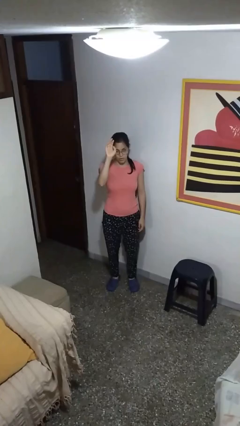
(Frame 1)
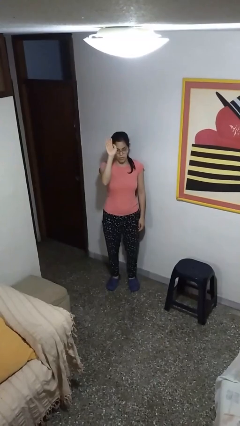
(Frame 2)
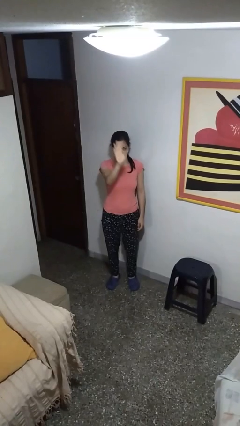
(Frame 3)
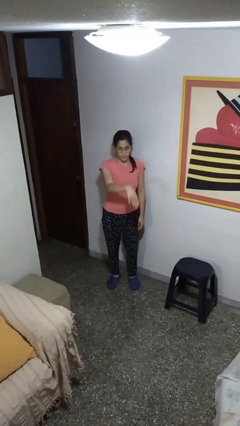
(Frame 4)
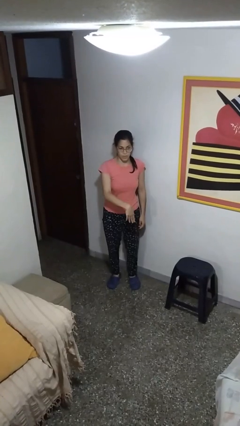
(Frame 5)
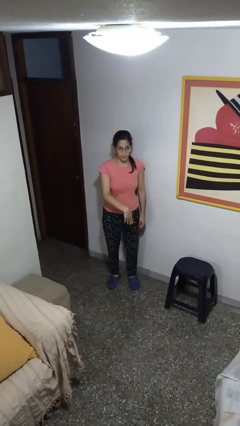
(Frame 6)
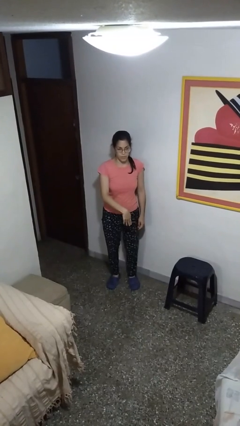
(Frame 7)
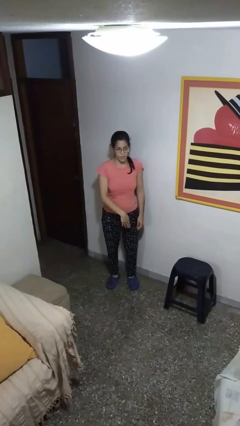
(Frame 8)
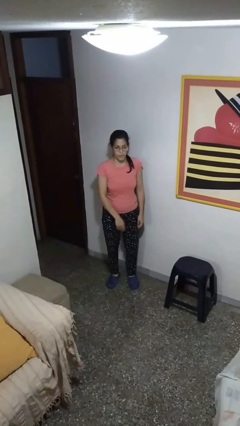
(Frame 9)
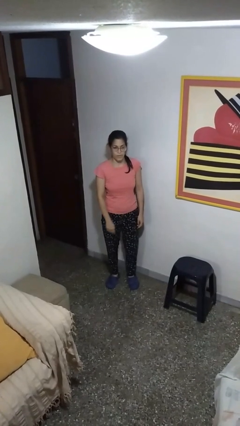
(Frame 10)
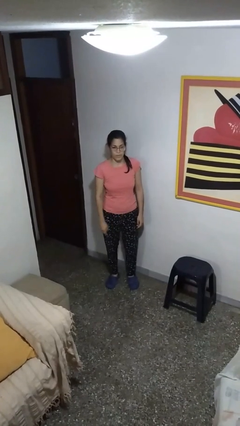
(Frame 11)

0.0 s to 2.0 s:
person gestures swipe down

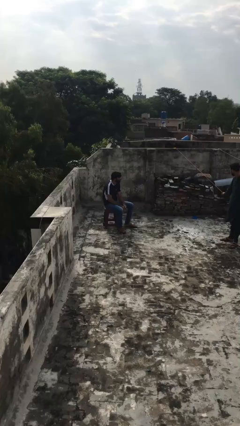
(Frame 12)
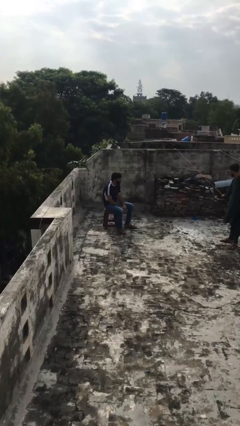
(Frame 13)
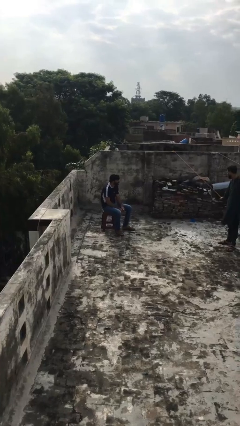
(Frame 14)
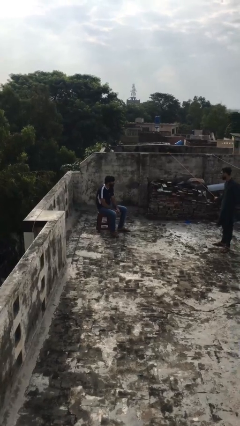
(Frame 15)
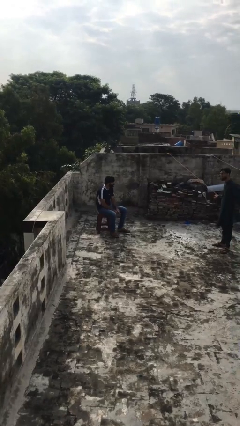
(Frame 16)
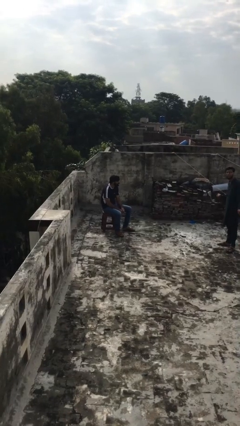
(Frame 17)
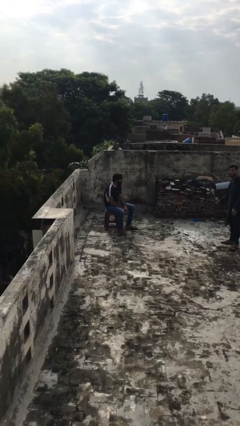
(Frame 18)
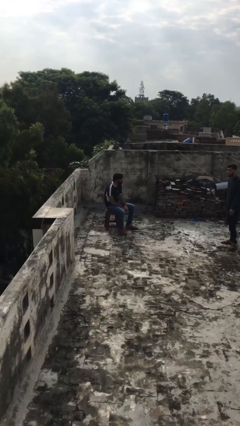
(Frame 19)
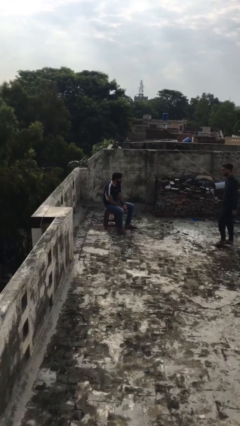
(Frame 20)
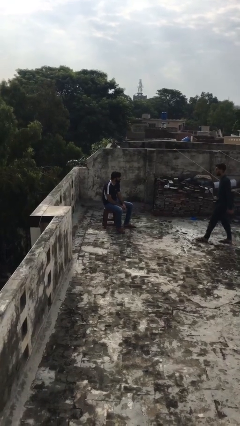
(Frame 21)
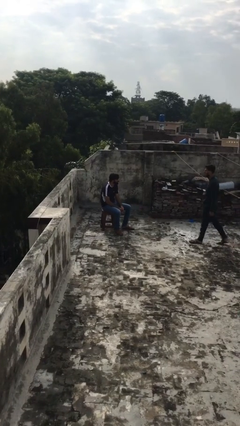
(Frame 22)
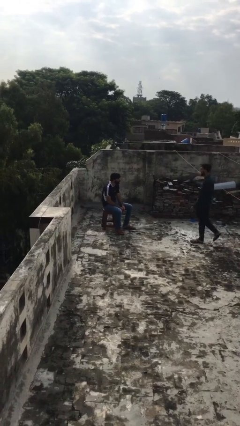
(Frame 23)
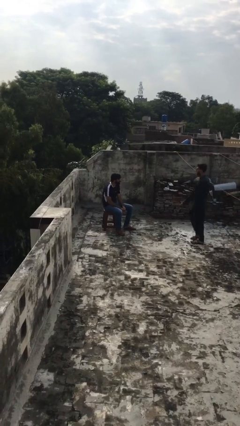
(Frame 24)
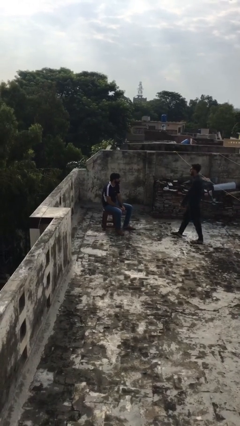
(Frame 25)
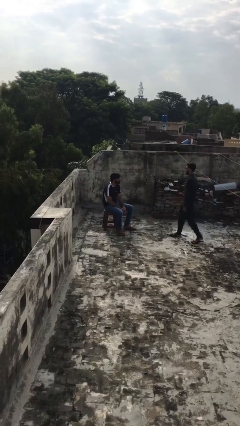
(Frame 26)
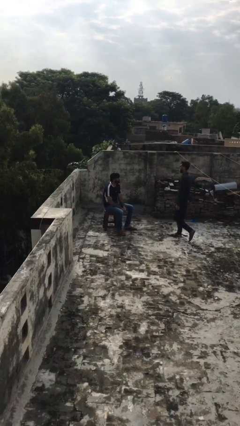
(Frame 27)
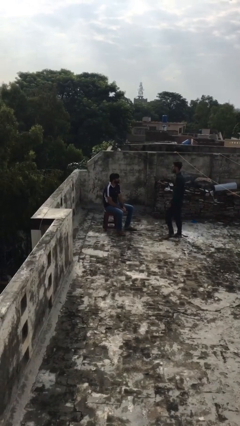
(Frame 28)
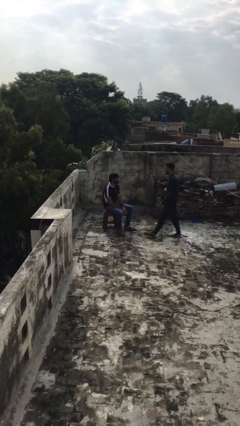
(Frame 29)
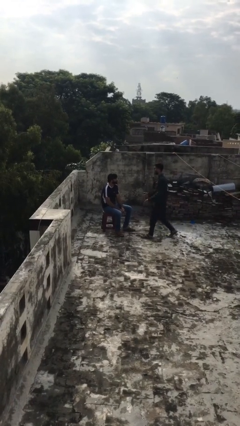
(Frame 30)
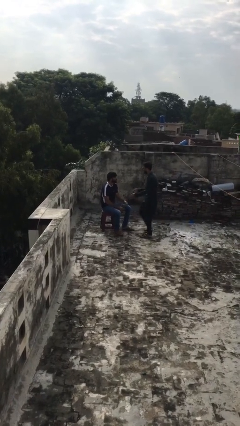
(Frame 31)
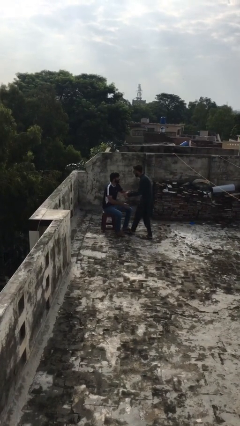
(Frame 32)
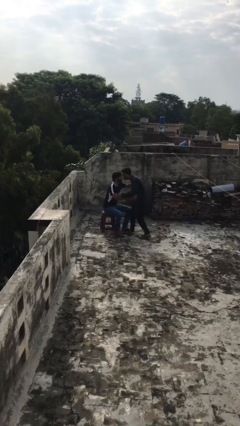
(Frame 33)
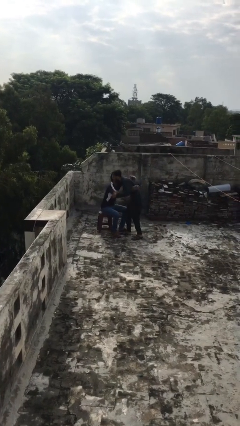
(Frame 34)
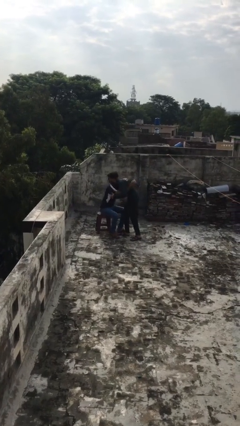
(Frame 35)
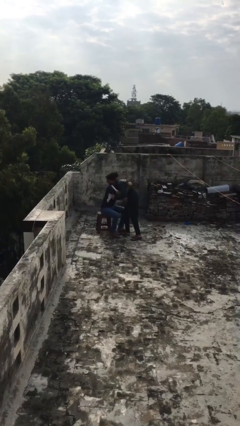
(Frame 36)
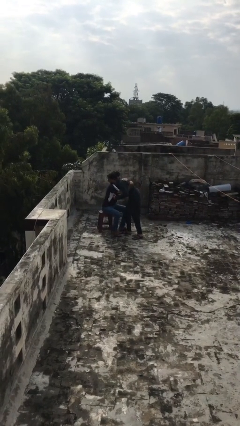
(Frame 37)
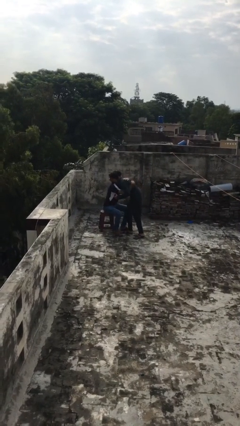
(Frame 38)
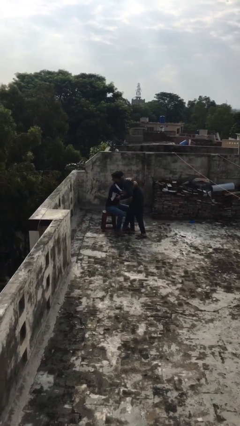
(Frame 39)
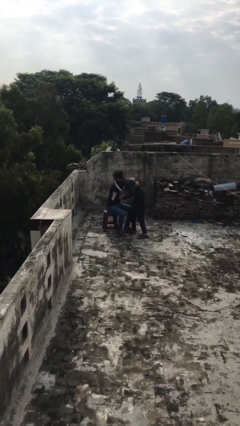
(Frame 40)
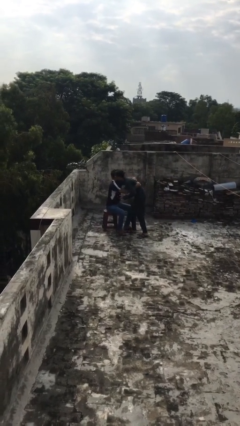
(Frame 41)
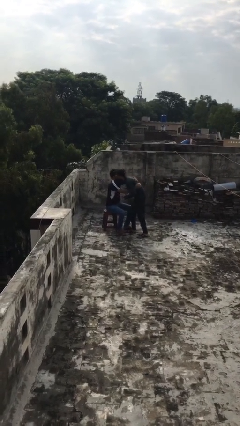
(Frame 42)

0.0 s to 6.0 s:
person embraces person

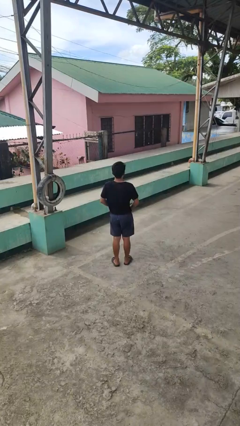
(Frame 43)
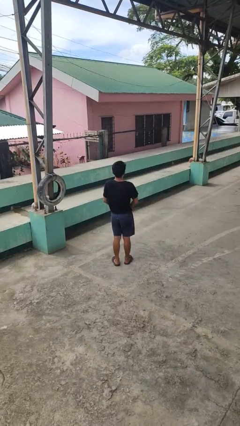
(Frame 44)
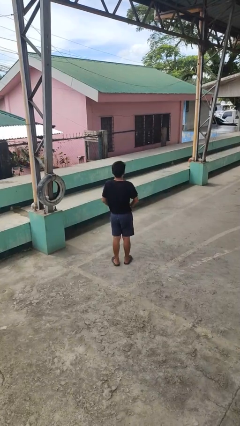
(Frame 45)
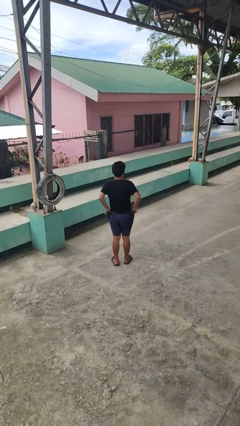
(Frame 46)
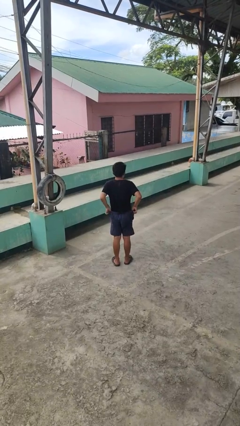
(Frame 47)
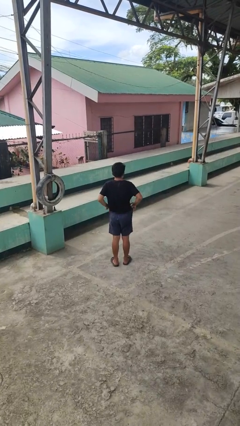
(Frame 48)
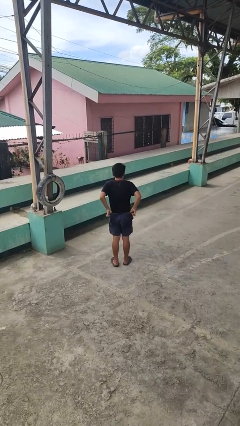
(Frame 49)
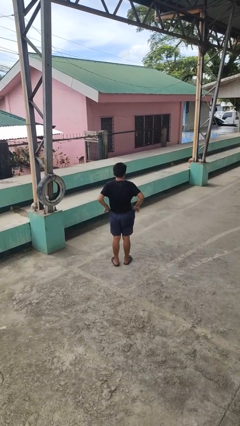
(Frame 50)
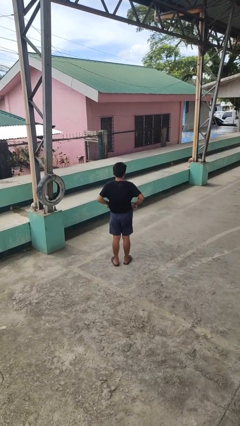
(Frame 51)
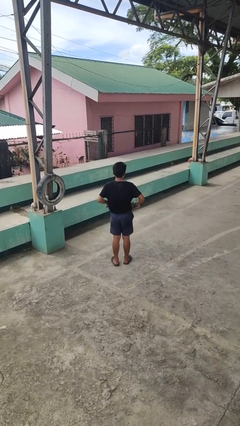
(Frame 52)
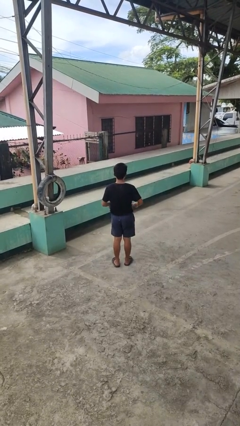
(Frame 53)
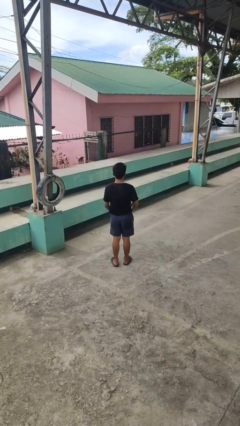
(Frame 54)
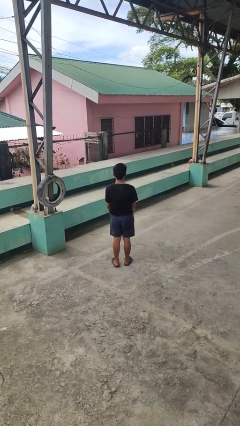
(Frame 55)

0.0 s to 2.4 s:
person hikes up pants

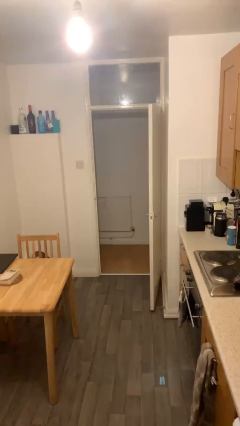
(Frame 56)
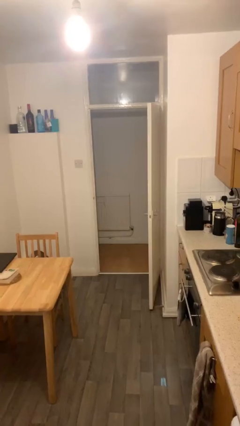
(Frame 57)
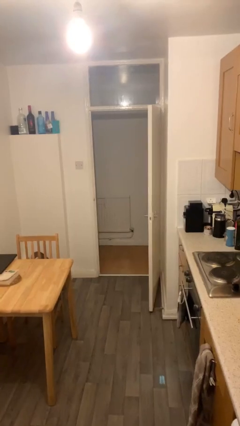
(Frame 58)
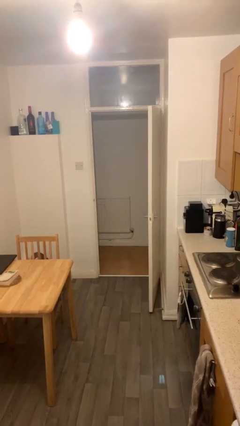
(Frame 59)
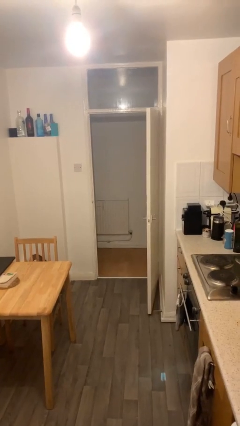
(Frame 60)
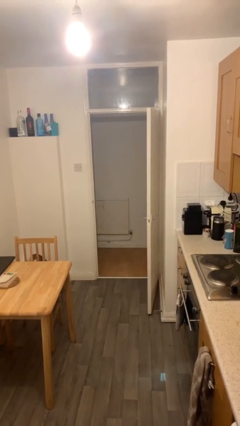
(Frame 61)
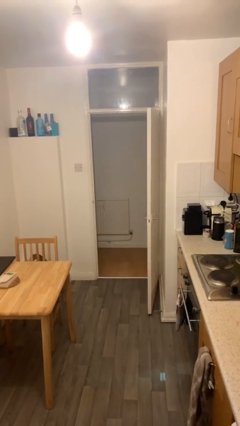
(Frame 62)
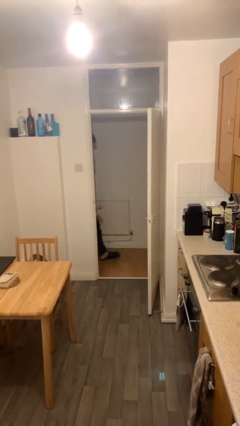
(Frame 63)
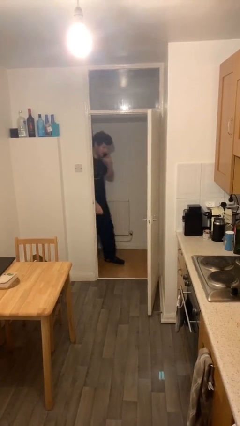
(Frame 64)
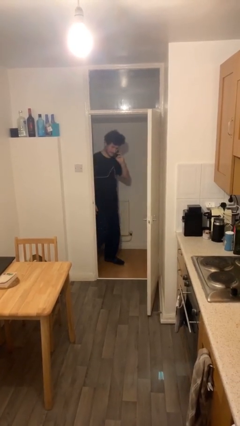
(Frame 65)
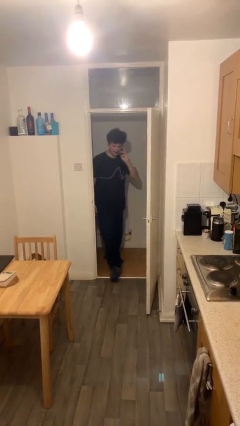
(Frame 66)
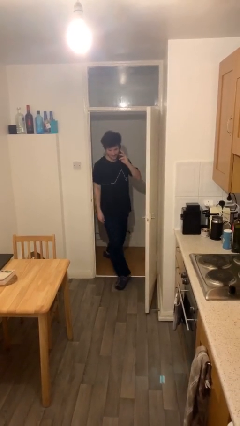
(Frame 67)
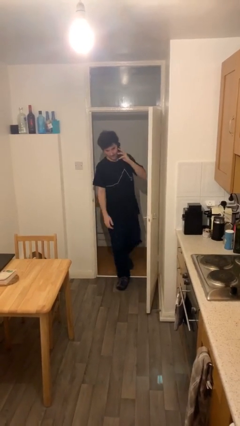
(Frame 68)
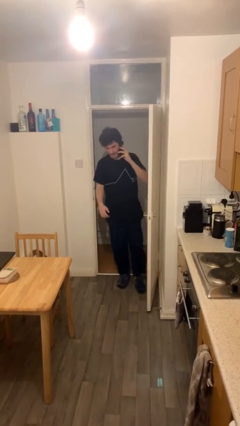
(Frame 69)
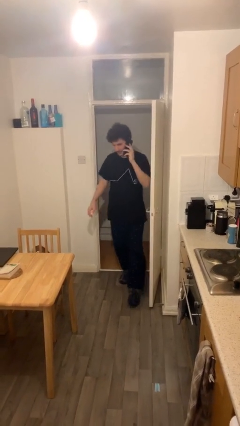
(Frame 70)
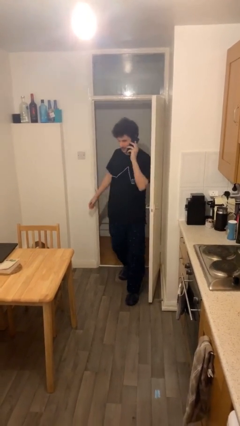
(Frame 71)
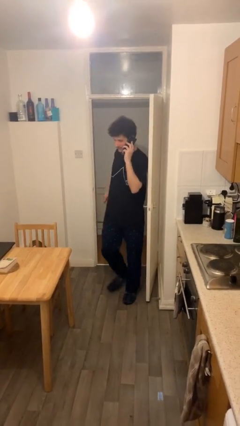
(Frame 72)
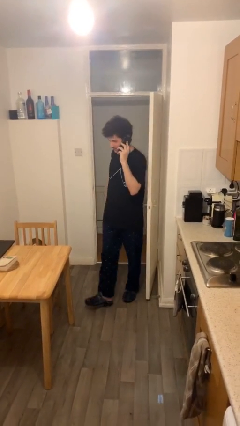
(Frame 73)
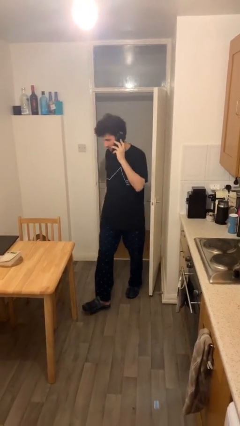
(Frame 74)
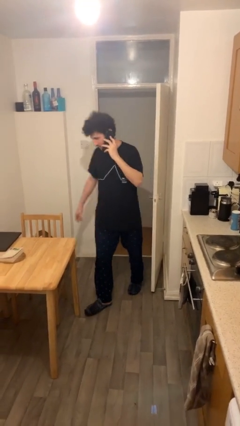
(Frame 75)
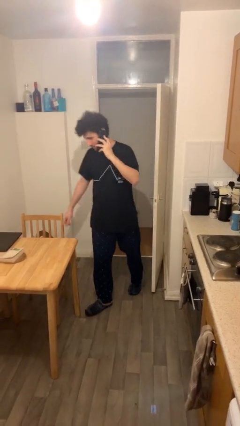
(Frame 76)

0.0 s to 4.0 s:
person enters scene through structure

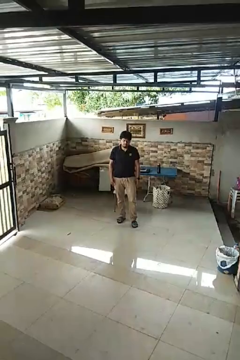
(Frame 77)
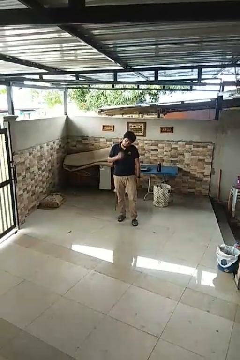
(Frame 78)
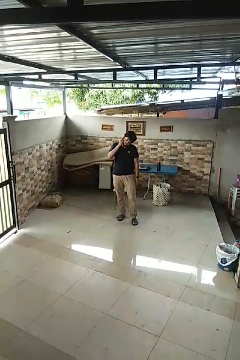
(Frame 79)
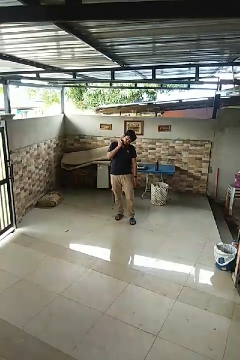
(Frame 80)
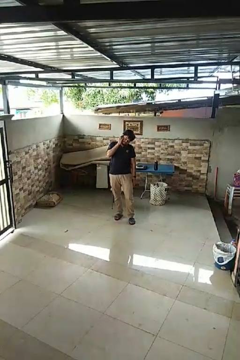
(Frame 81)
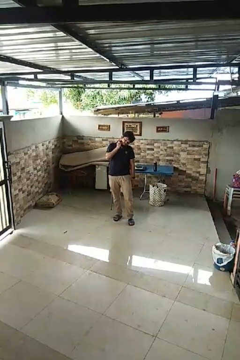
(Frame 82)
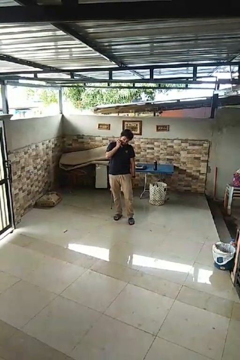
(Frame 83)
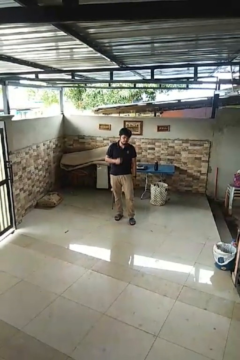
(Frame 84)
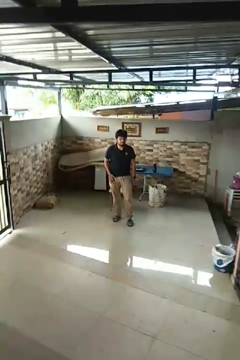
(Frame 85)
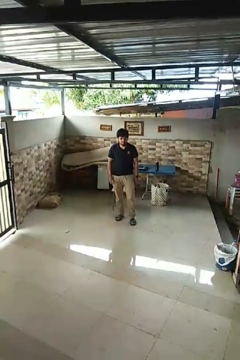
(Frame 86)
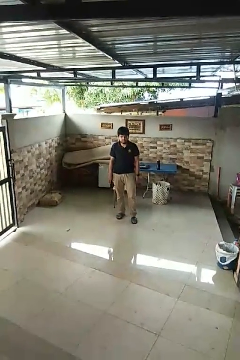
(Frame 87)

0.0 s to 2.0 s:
person scratches face

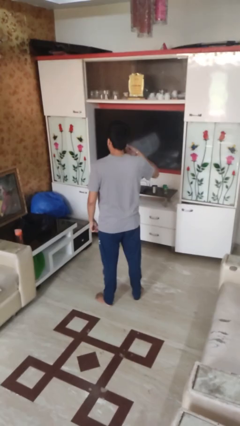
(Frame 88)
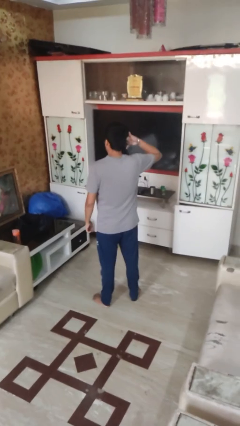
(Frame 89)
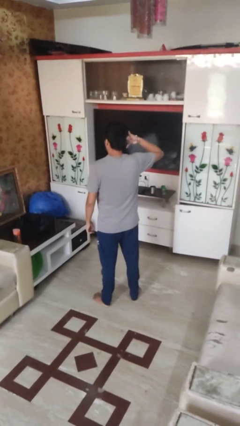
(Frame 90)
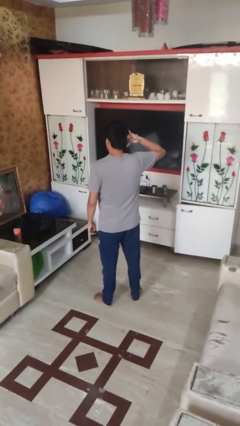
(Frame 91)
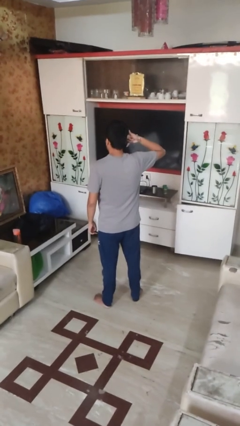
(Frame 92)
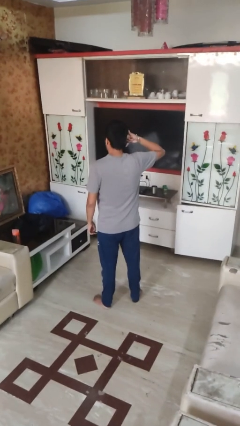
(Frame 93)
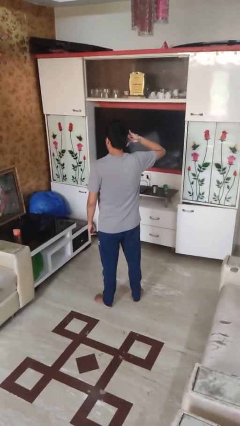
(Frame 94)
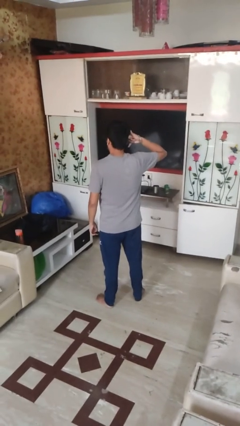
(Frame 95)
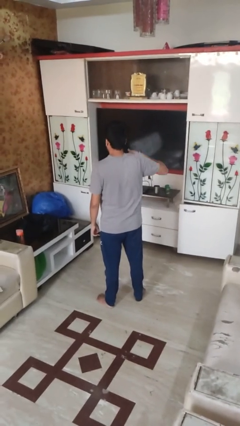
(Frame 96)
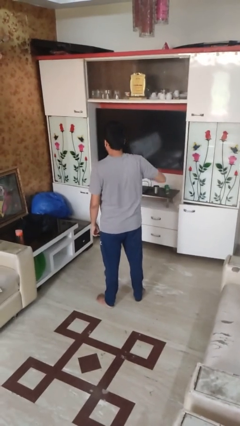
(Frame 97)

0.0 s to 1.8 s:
person gestures call me
